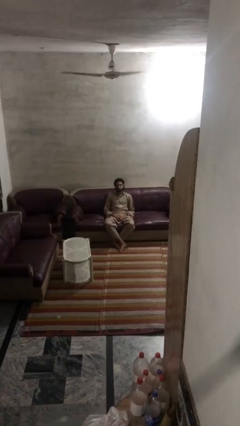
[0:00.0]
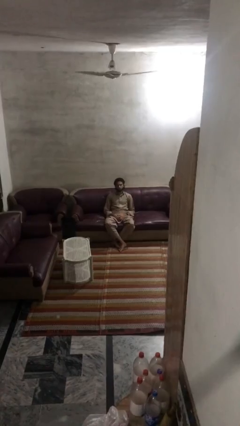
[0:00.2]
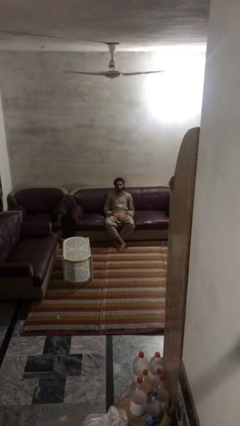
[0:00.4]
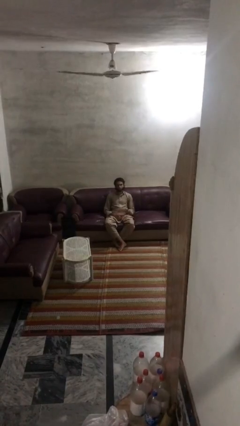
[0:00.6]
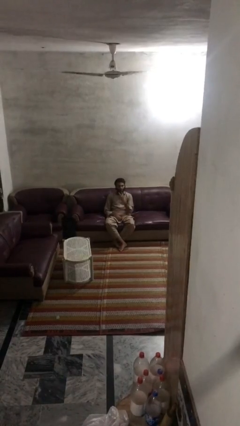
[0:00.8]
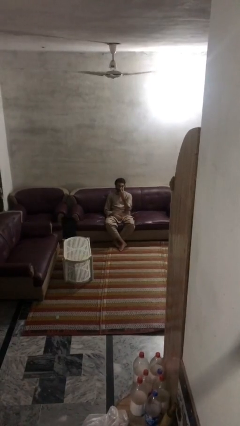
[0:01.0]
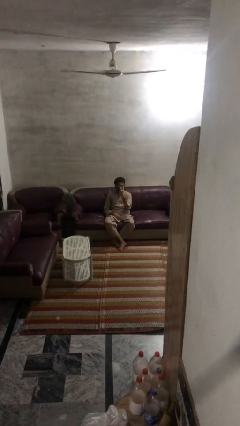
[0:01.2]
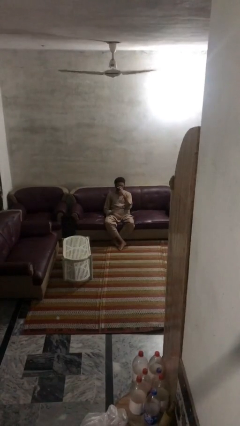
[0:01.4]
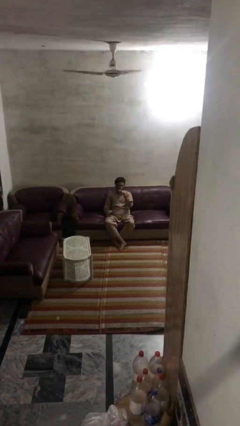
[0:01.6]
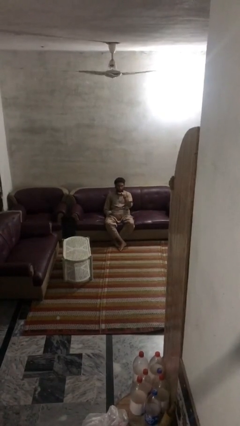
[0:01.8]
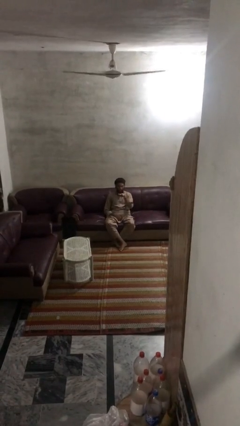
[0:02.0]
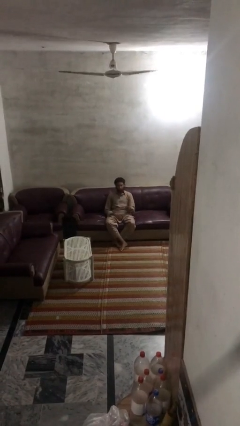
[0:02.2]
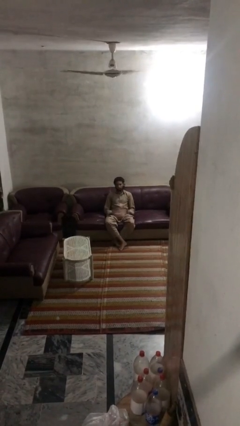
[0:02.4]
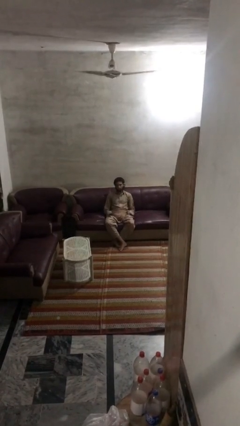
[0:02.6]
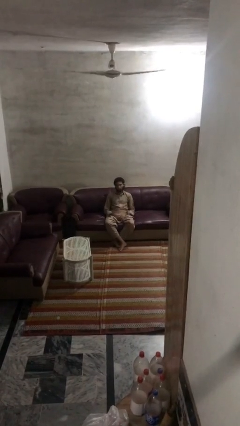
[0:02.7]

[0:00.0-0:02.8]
person gestures watch closely

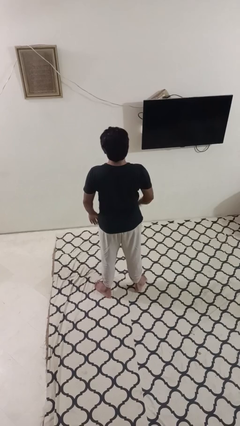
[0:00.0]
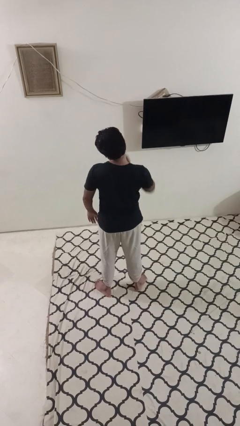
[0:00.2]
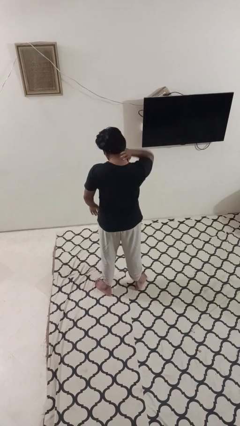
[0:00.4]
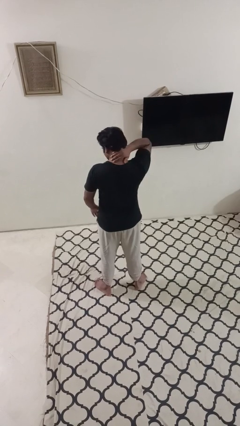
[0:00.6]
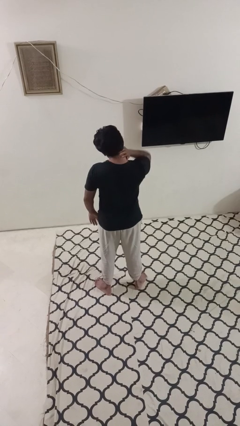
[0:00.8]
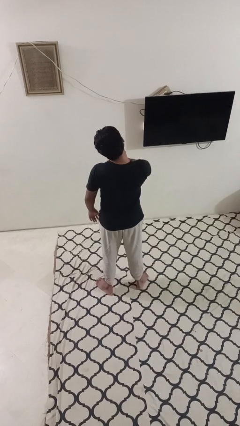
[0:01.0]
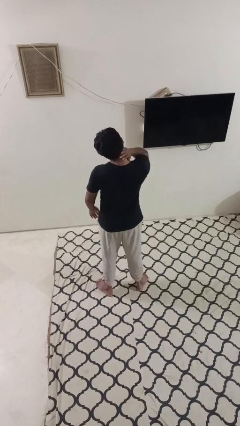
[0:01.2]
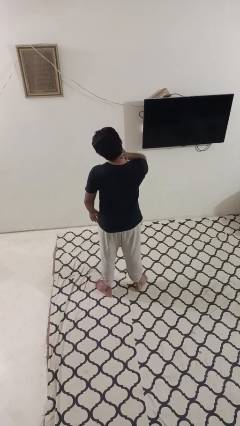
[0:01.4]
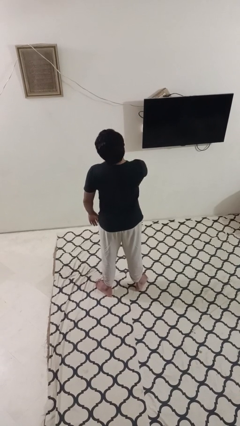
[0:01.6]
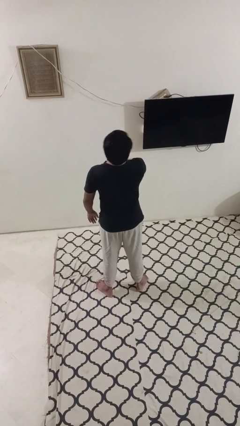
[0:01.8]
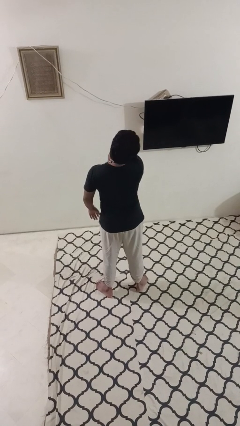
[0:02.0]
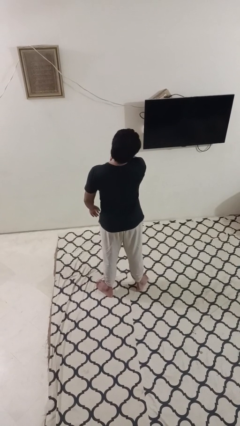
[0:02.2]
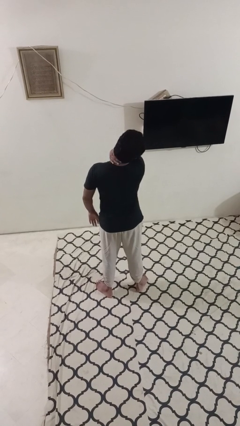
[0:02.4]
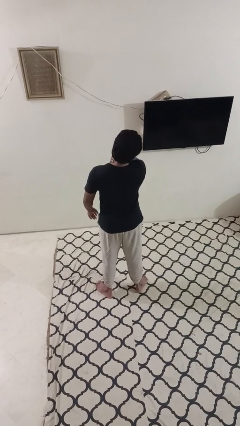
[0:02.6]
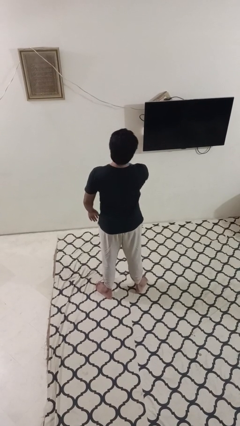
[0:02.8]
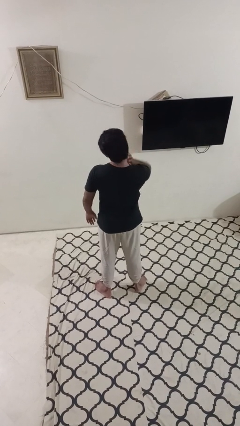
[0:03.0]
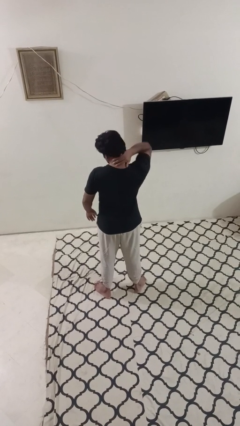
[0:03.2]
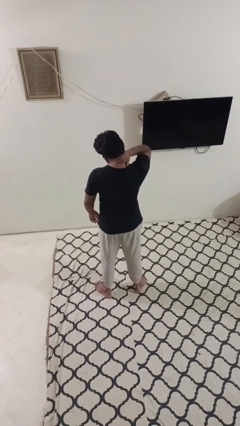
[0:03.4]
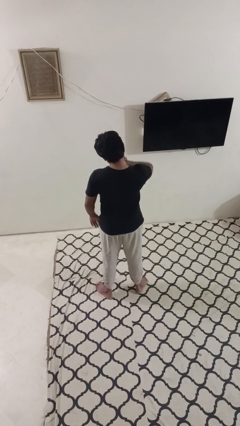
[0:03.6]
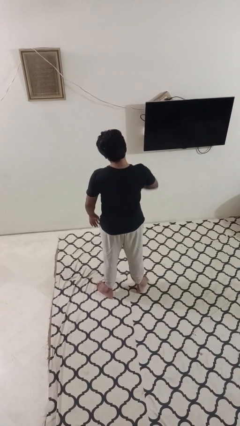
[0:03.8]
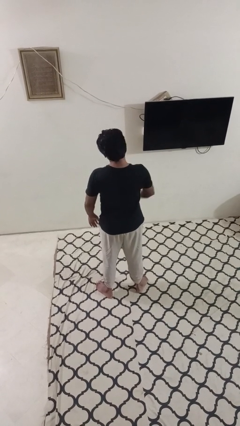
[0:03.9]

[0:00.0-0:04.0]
person rubs neck

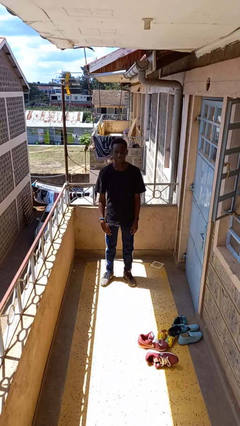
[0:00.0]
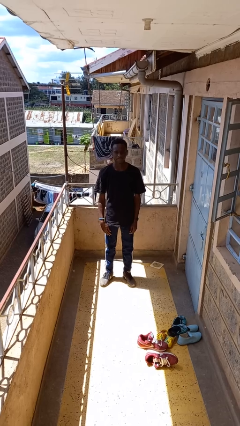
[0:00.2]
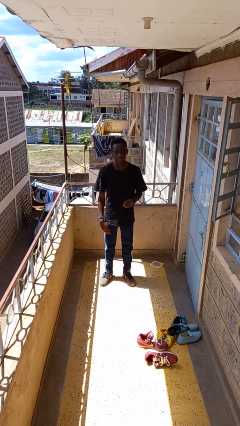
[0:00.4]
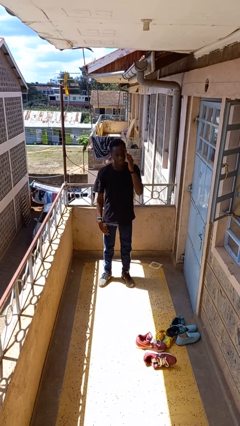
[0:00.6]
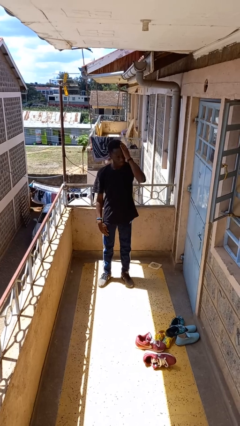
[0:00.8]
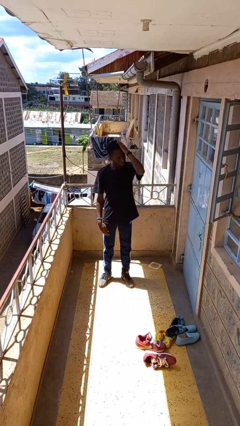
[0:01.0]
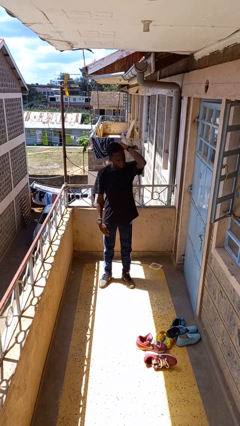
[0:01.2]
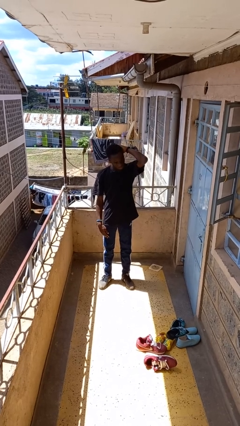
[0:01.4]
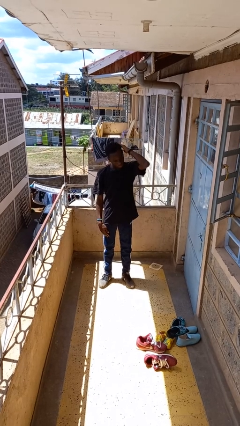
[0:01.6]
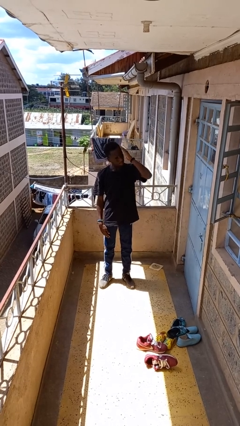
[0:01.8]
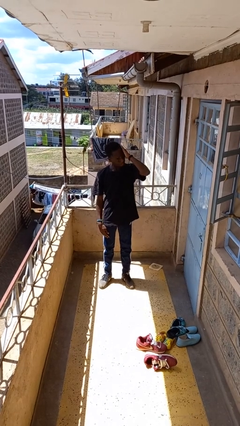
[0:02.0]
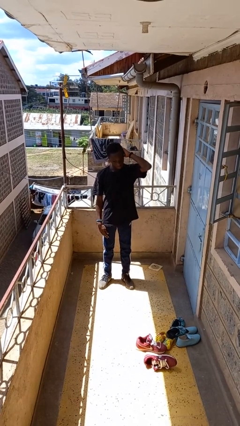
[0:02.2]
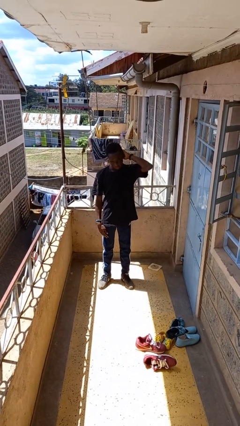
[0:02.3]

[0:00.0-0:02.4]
person strokes hair

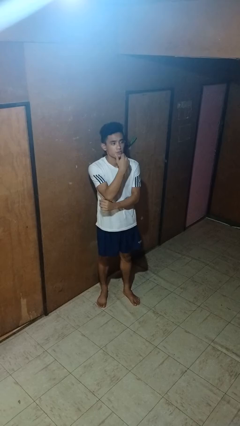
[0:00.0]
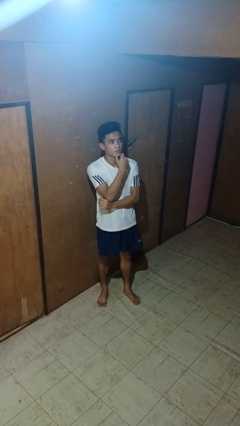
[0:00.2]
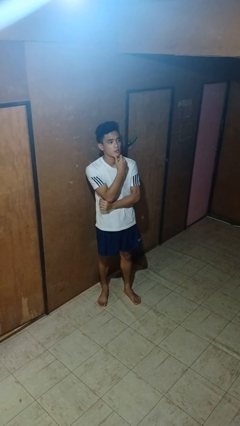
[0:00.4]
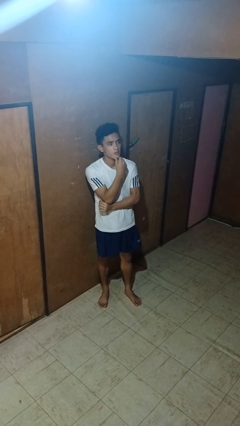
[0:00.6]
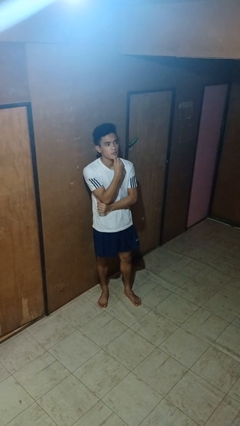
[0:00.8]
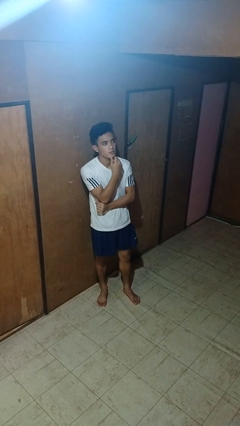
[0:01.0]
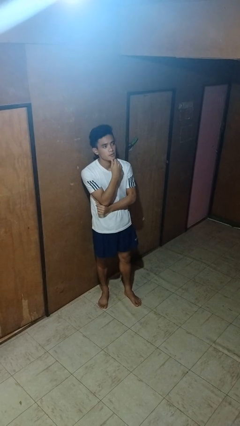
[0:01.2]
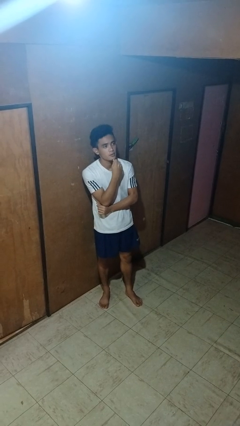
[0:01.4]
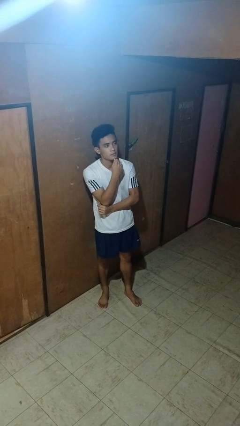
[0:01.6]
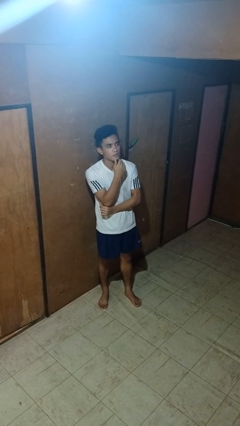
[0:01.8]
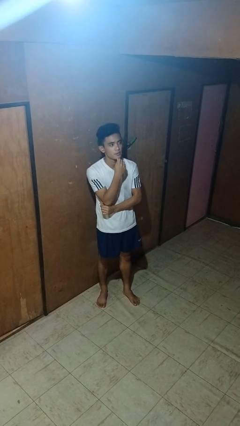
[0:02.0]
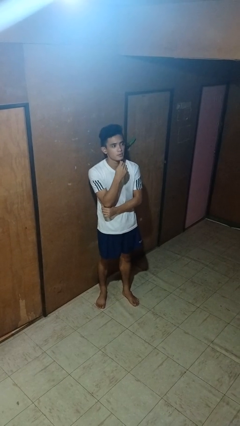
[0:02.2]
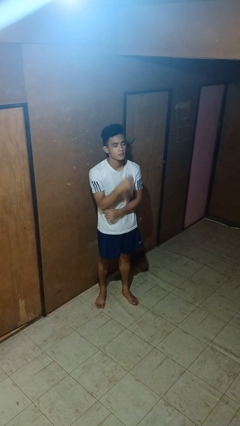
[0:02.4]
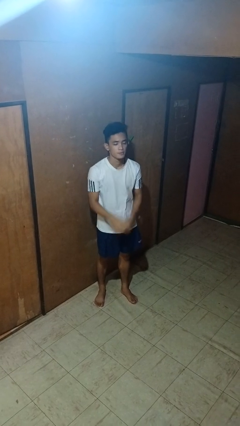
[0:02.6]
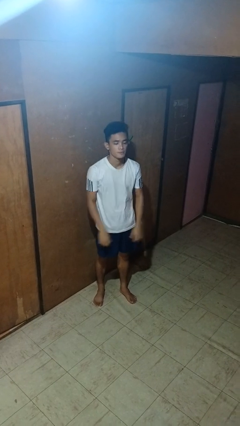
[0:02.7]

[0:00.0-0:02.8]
person strokes chin

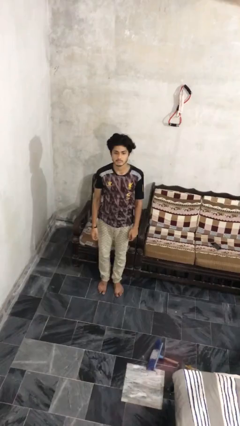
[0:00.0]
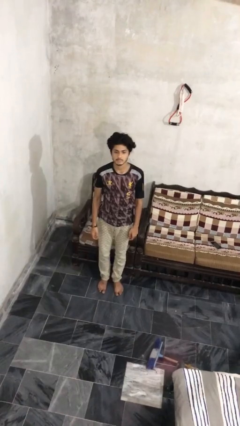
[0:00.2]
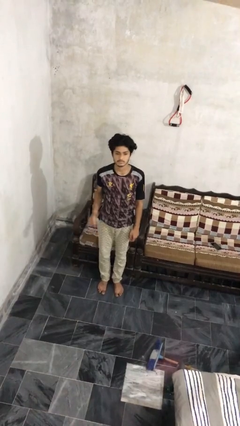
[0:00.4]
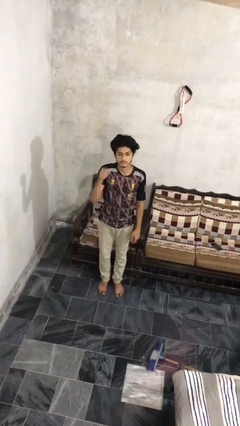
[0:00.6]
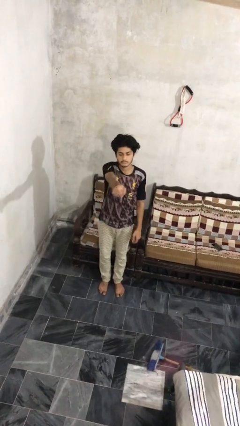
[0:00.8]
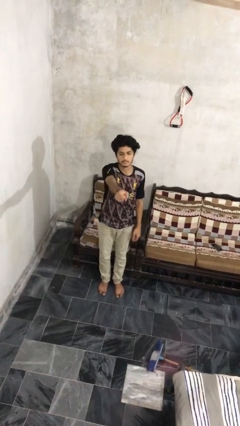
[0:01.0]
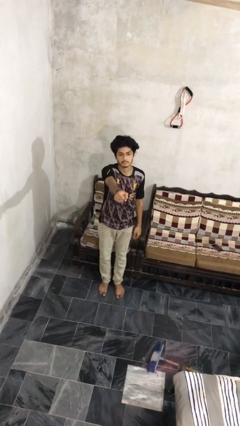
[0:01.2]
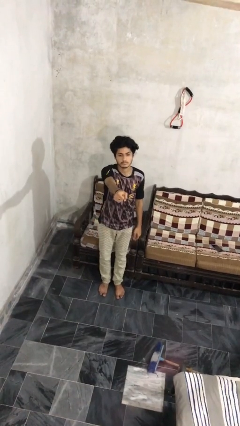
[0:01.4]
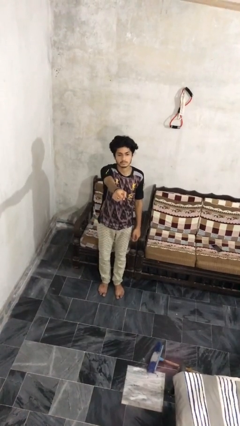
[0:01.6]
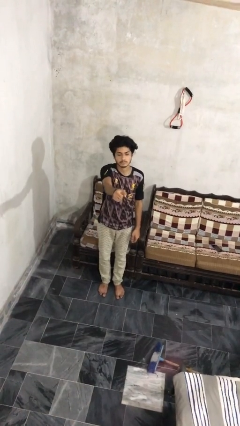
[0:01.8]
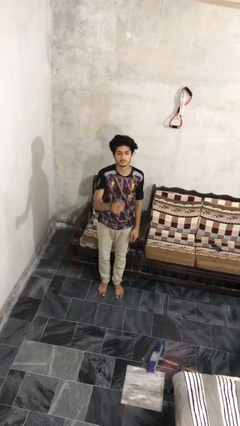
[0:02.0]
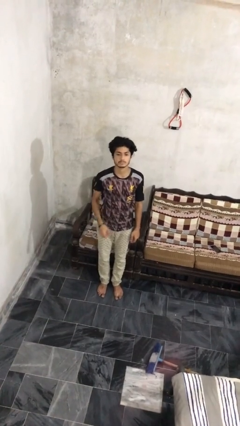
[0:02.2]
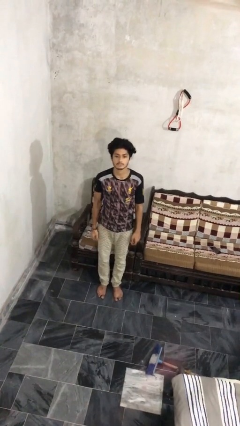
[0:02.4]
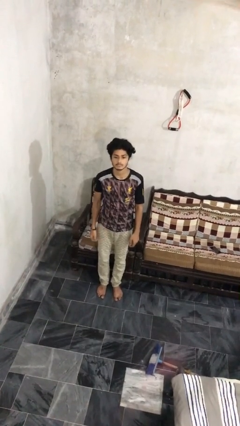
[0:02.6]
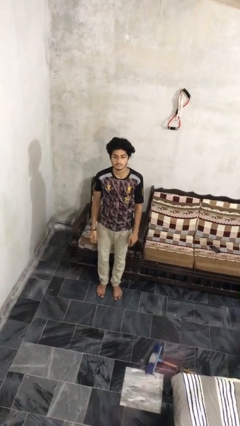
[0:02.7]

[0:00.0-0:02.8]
person punches

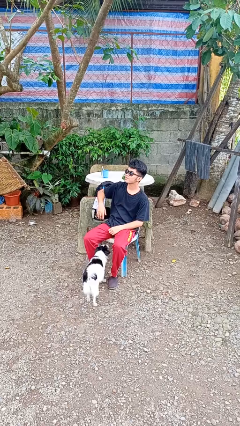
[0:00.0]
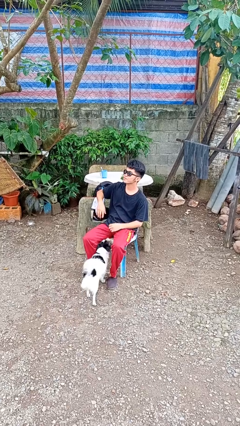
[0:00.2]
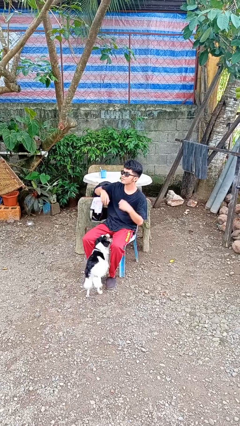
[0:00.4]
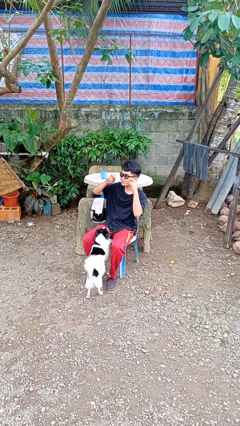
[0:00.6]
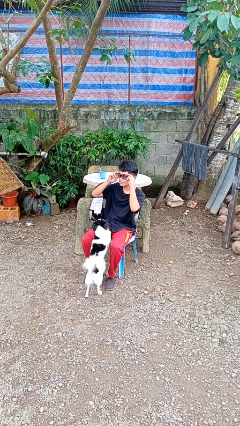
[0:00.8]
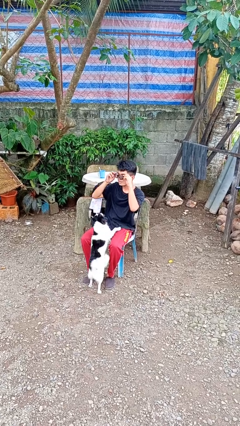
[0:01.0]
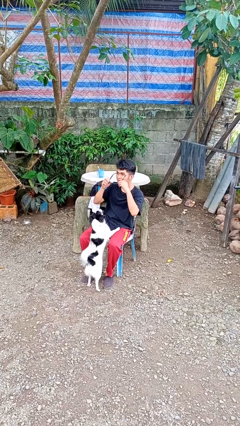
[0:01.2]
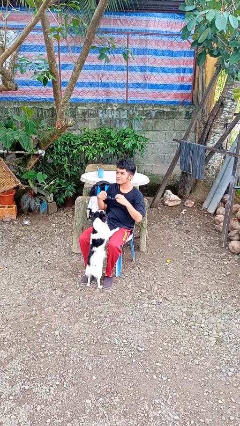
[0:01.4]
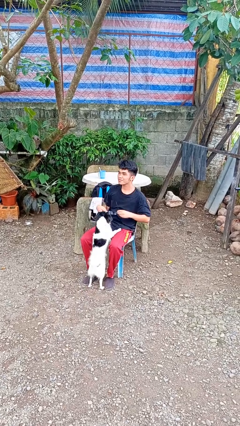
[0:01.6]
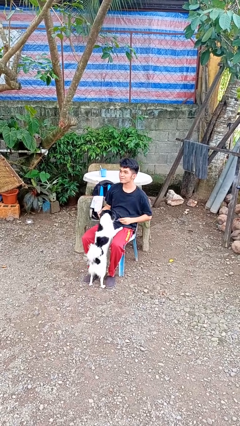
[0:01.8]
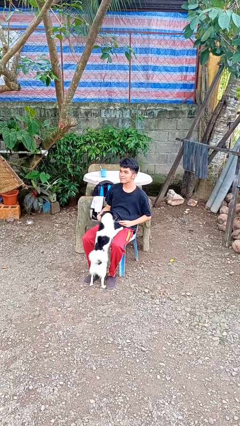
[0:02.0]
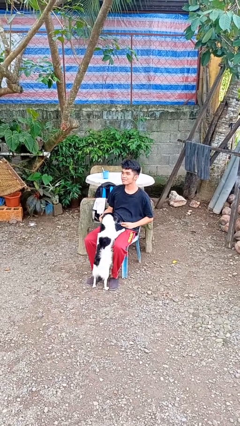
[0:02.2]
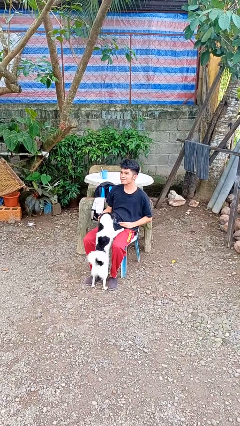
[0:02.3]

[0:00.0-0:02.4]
person takes off sunglasses

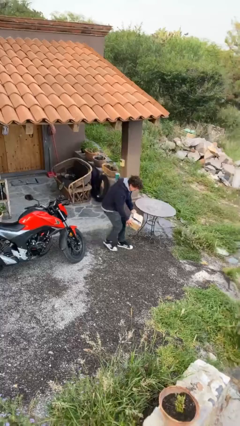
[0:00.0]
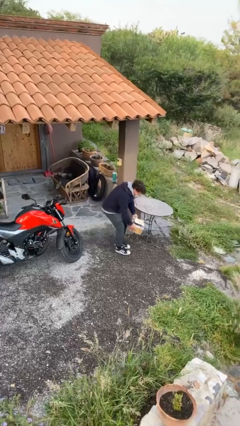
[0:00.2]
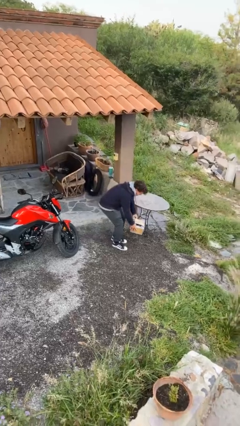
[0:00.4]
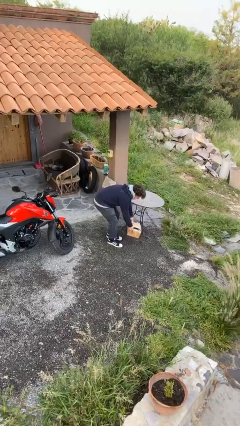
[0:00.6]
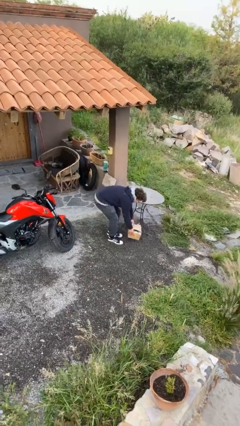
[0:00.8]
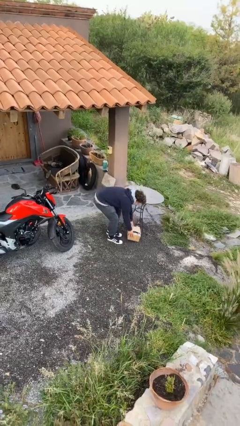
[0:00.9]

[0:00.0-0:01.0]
person puts down object on floor
